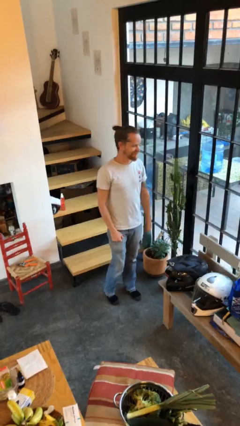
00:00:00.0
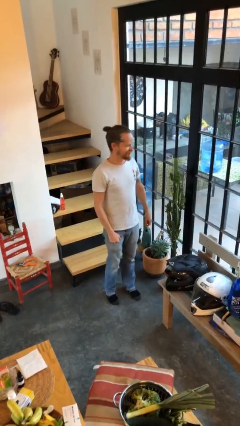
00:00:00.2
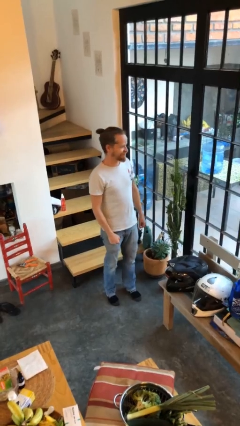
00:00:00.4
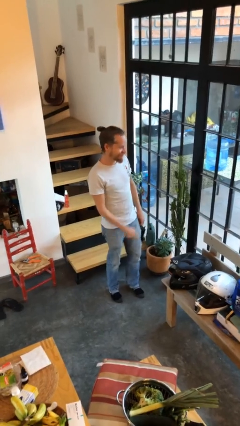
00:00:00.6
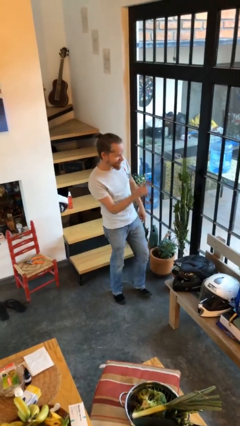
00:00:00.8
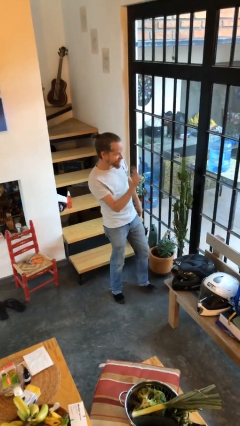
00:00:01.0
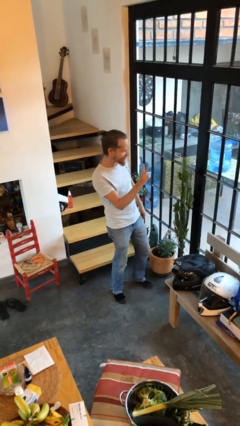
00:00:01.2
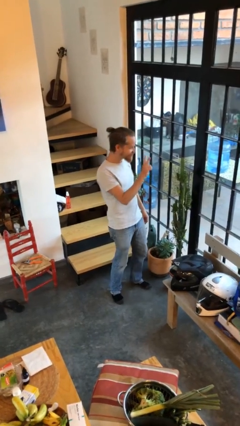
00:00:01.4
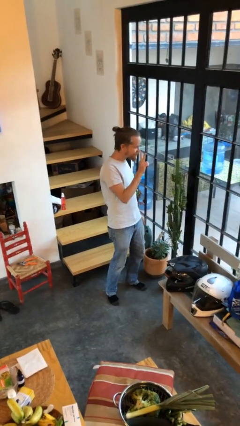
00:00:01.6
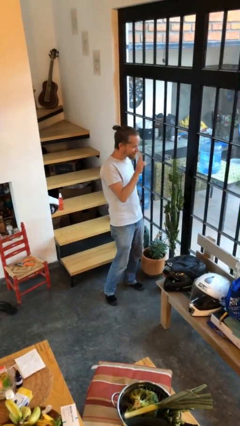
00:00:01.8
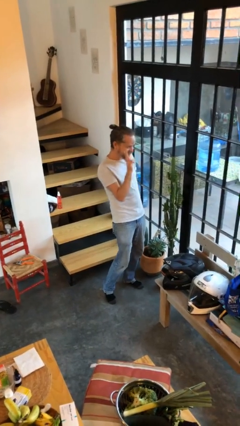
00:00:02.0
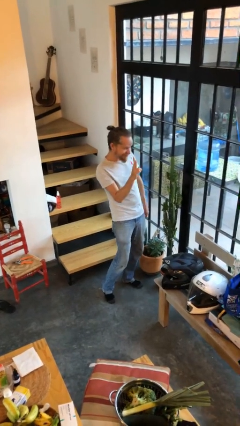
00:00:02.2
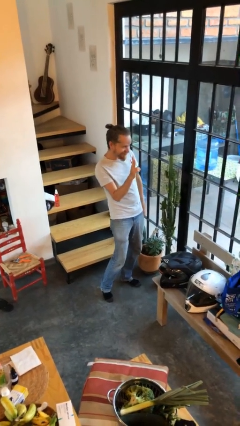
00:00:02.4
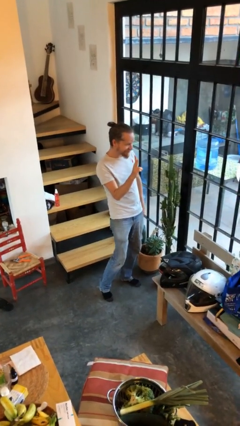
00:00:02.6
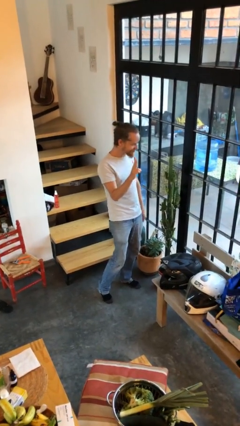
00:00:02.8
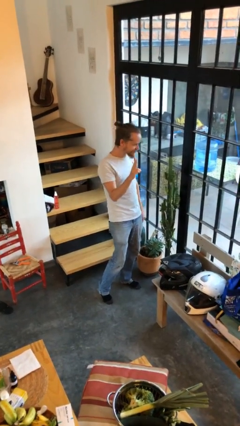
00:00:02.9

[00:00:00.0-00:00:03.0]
person gestures peace

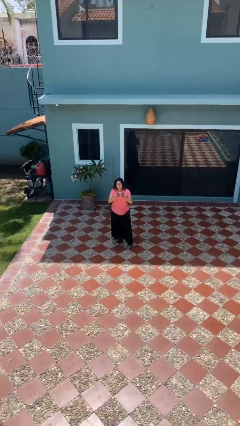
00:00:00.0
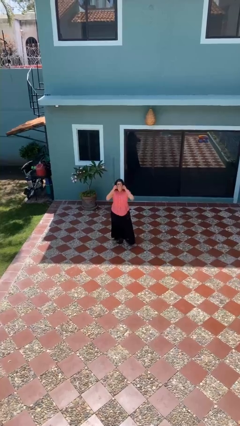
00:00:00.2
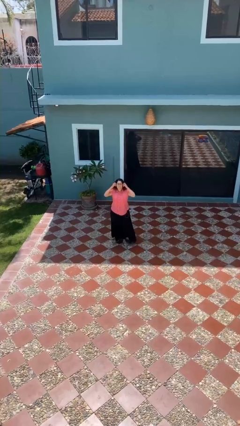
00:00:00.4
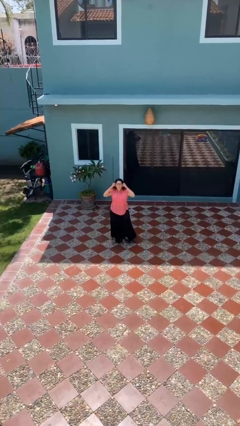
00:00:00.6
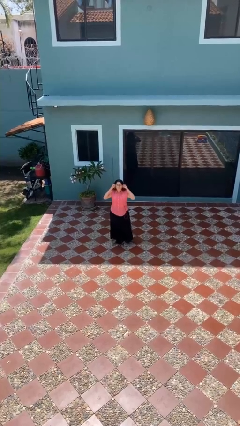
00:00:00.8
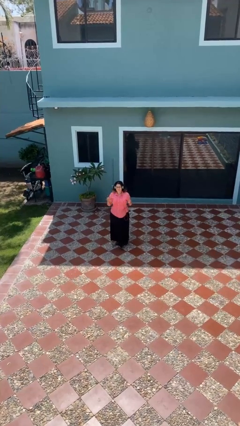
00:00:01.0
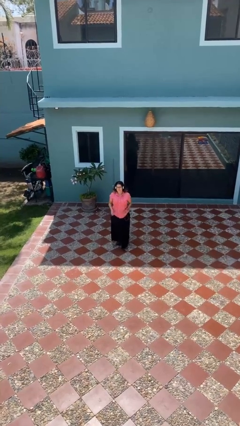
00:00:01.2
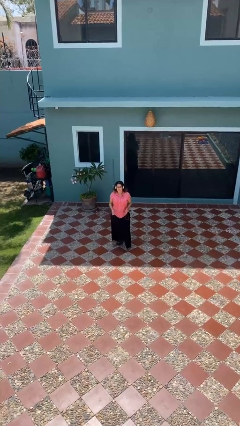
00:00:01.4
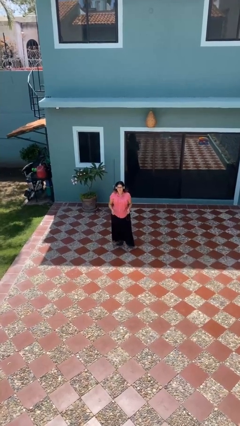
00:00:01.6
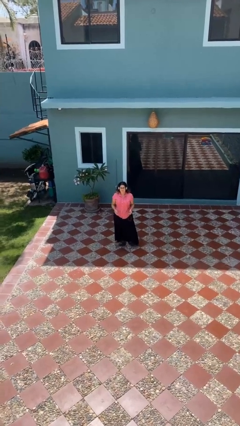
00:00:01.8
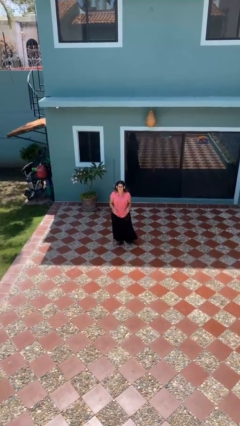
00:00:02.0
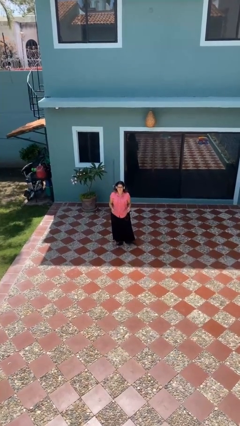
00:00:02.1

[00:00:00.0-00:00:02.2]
person puts on headphones

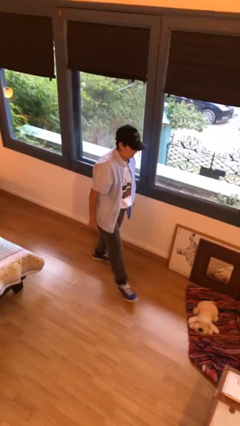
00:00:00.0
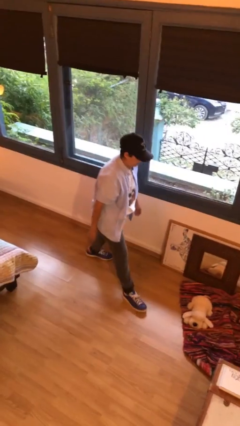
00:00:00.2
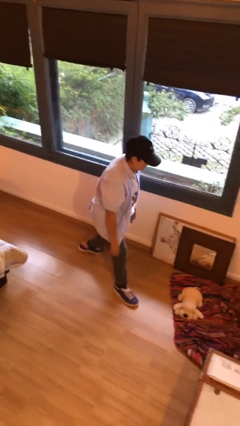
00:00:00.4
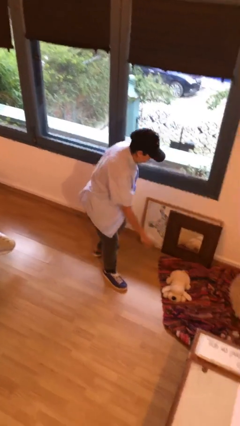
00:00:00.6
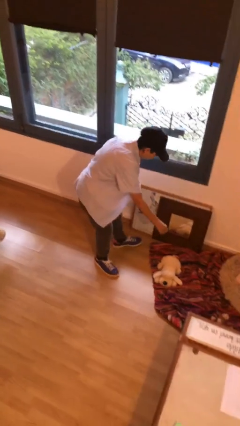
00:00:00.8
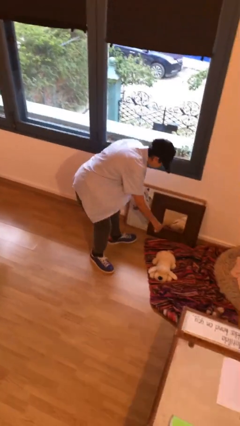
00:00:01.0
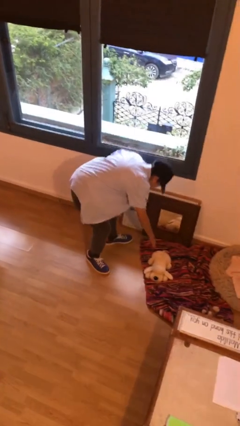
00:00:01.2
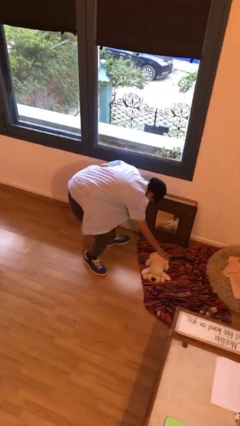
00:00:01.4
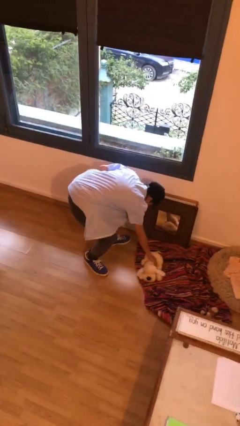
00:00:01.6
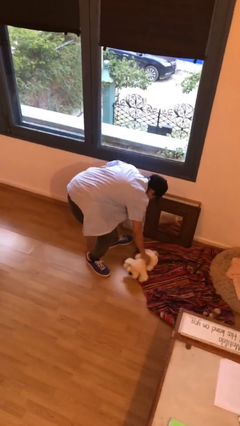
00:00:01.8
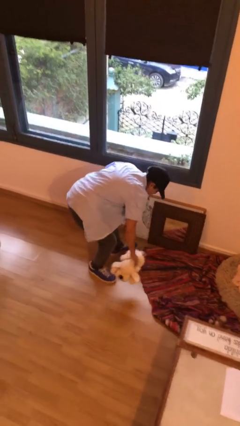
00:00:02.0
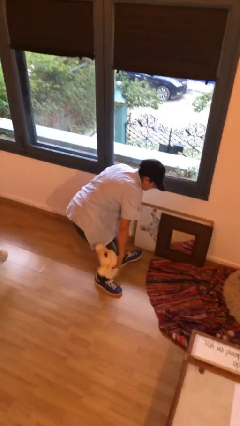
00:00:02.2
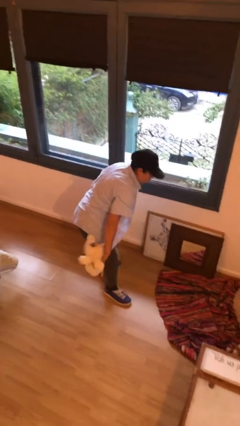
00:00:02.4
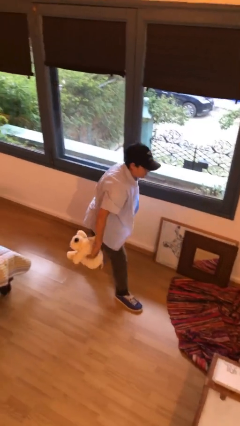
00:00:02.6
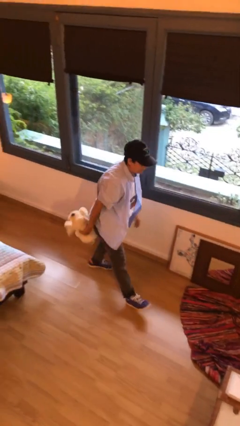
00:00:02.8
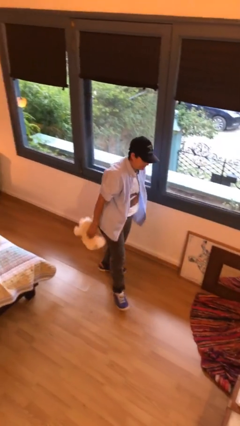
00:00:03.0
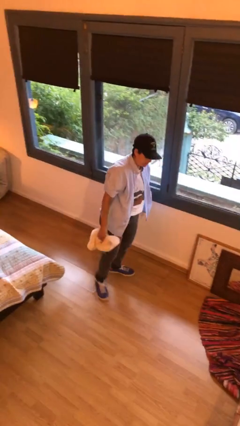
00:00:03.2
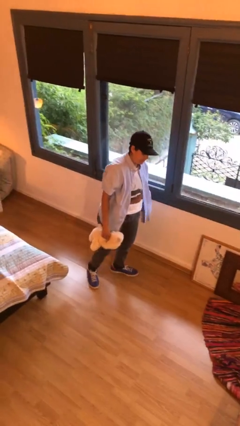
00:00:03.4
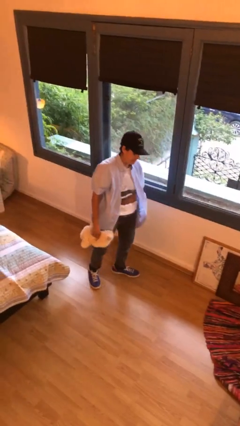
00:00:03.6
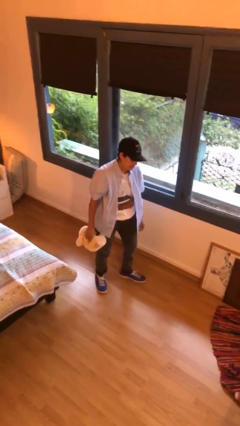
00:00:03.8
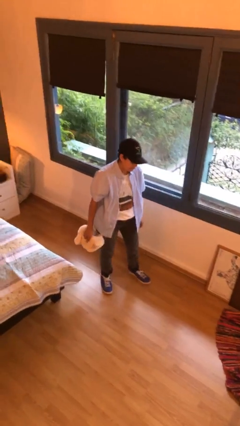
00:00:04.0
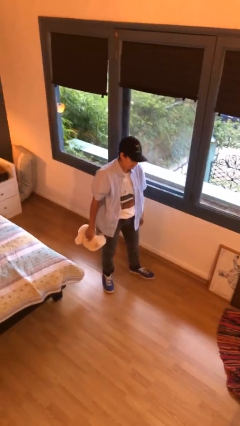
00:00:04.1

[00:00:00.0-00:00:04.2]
person picks up object from floor

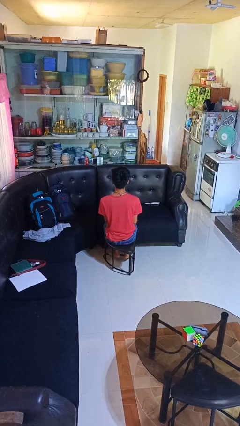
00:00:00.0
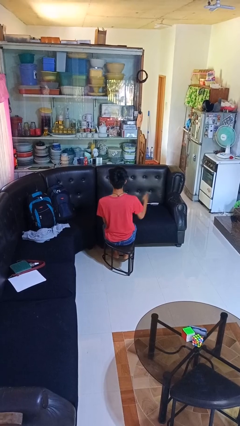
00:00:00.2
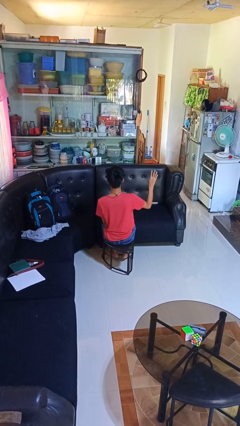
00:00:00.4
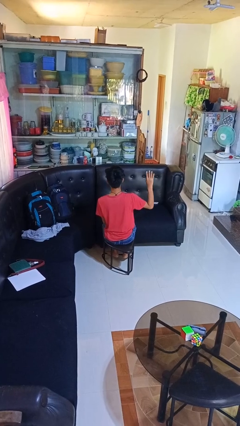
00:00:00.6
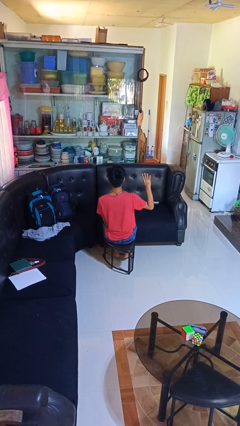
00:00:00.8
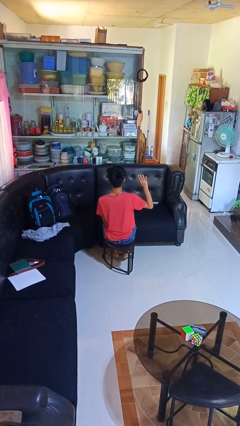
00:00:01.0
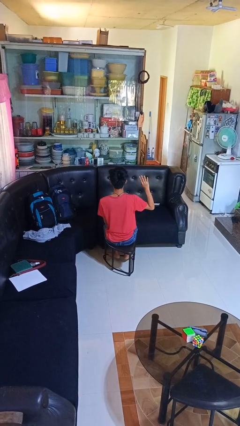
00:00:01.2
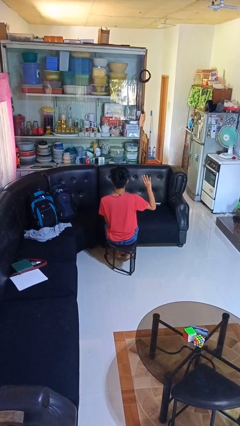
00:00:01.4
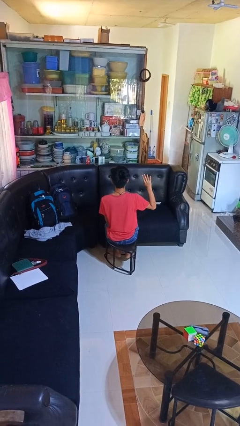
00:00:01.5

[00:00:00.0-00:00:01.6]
person gestures number four

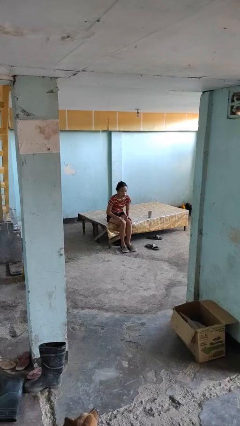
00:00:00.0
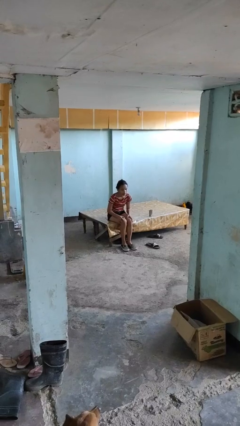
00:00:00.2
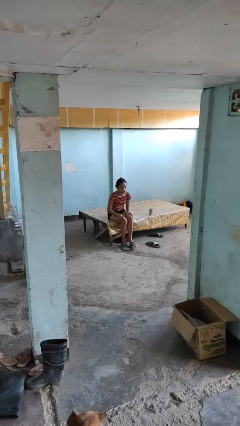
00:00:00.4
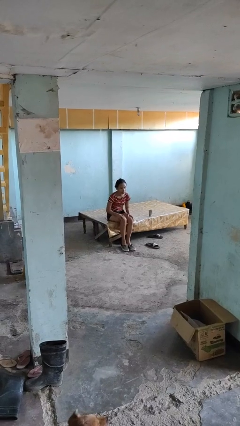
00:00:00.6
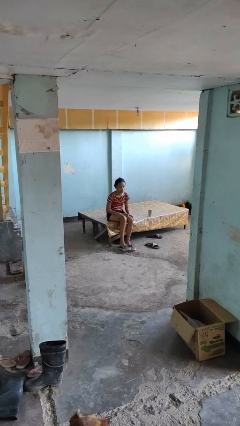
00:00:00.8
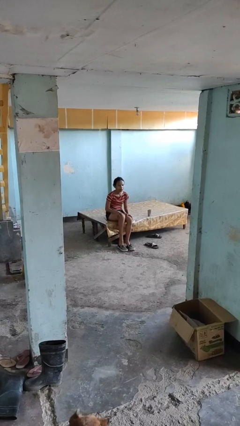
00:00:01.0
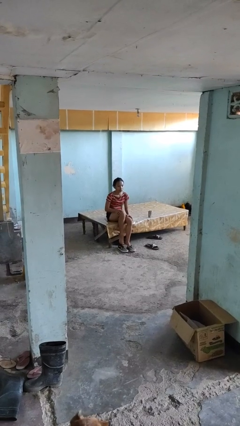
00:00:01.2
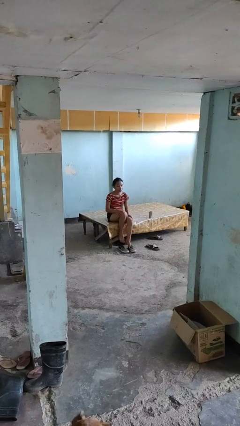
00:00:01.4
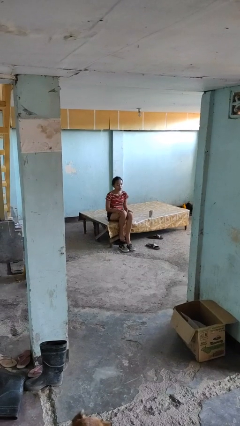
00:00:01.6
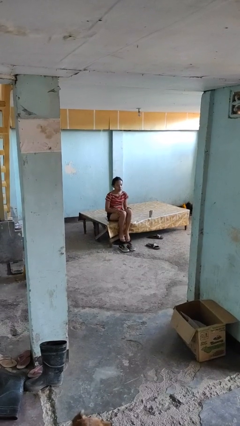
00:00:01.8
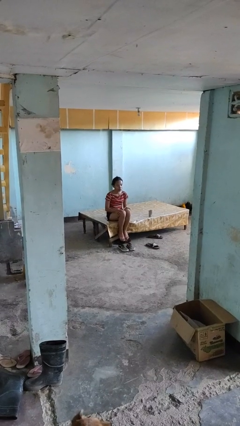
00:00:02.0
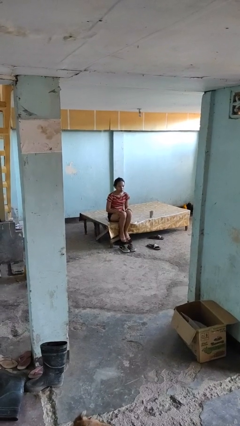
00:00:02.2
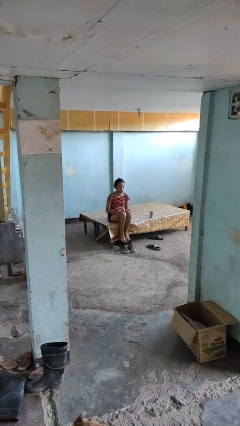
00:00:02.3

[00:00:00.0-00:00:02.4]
person takes off shoes

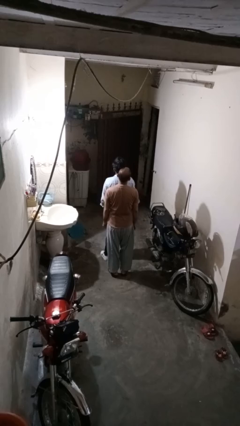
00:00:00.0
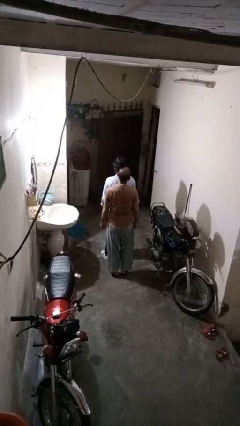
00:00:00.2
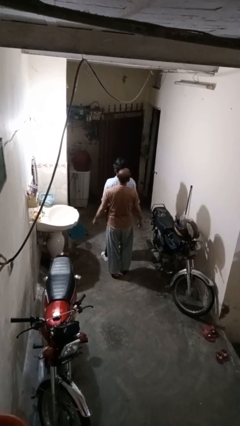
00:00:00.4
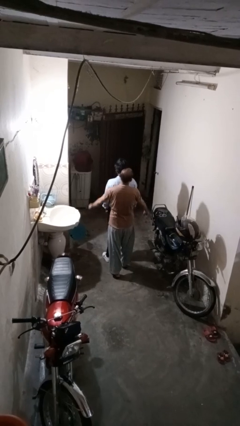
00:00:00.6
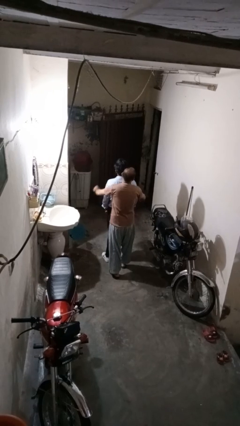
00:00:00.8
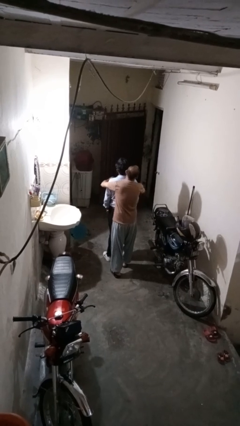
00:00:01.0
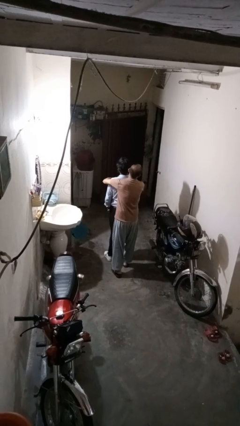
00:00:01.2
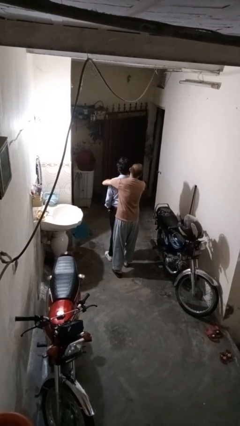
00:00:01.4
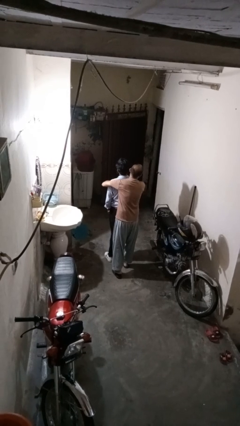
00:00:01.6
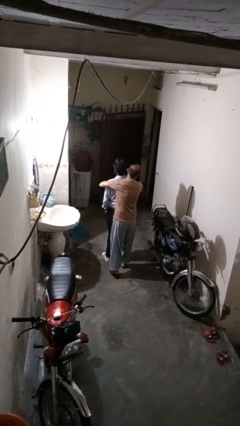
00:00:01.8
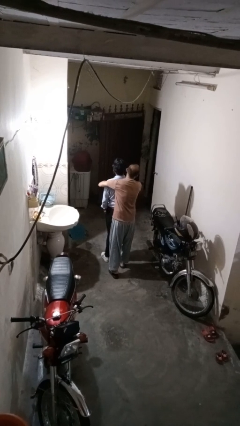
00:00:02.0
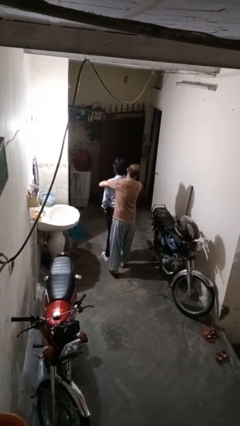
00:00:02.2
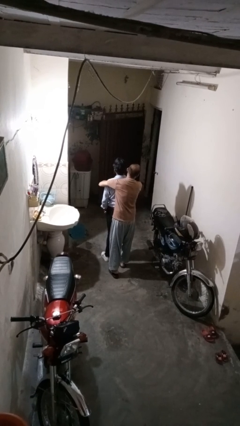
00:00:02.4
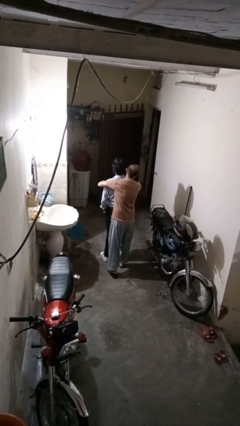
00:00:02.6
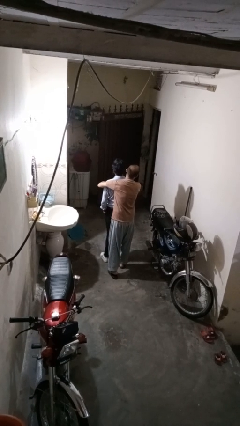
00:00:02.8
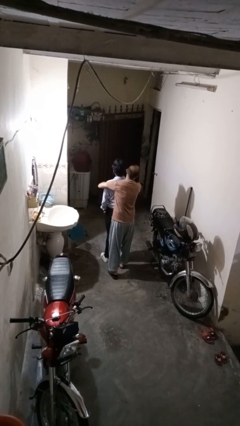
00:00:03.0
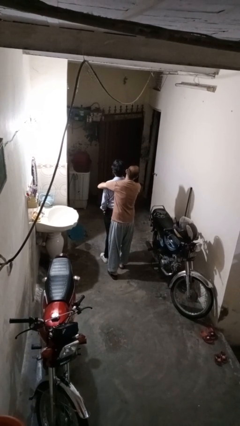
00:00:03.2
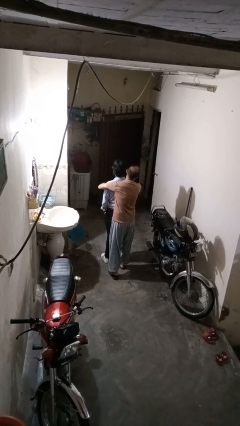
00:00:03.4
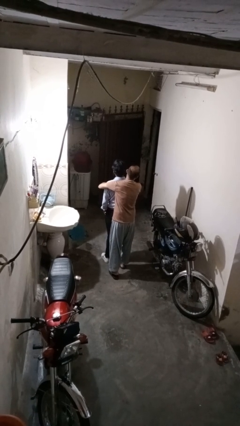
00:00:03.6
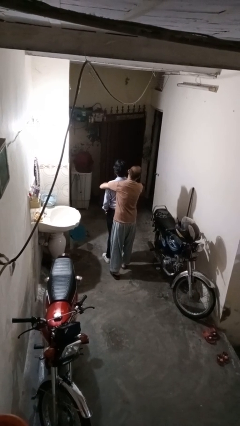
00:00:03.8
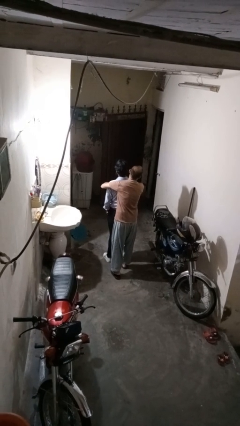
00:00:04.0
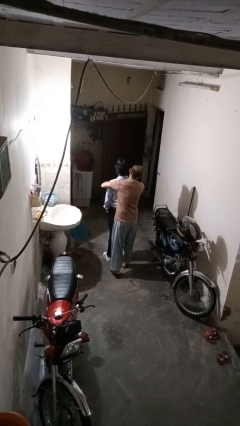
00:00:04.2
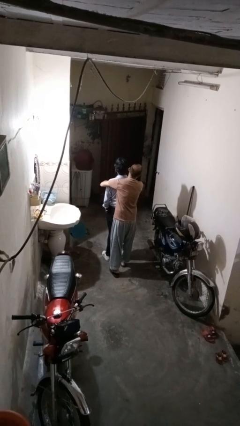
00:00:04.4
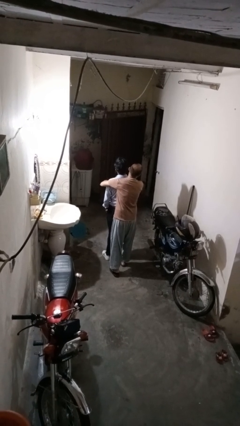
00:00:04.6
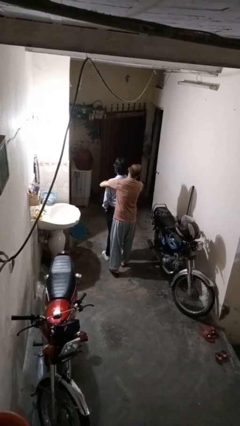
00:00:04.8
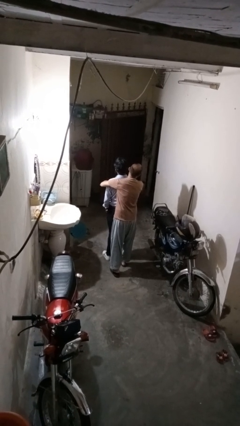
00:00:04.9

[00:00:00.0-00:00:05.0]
person hugs person from behind
